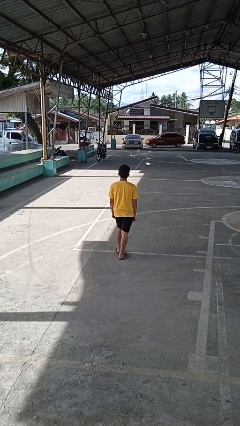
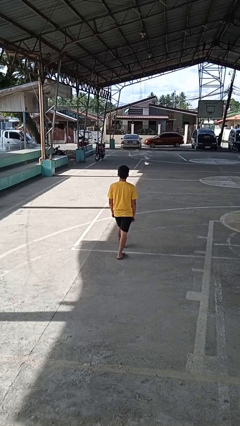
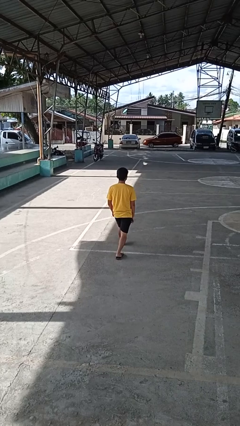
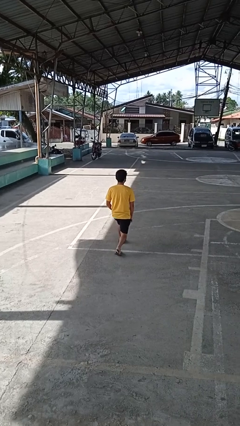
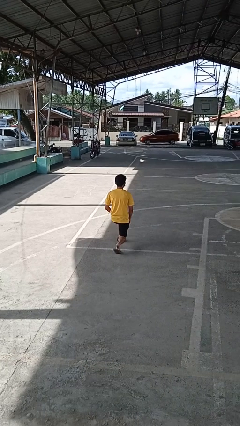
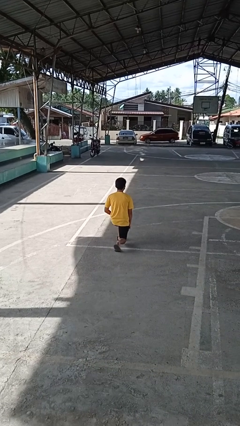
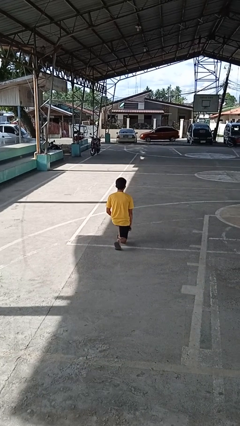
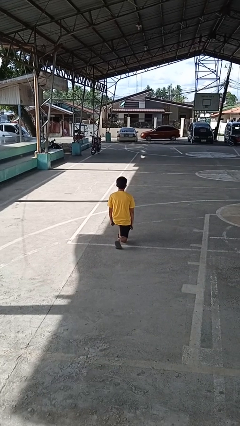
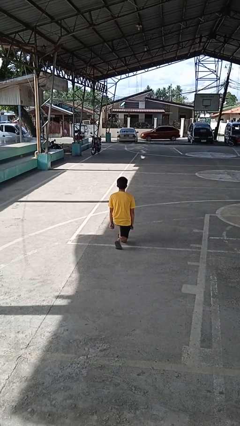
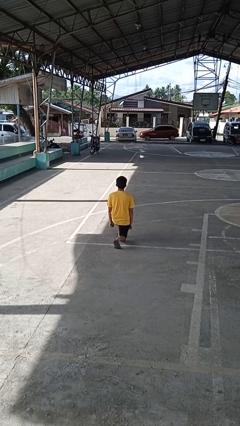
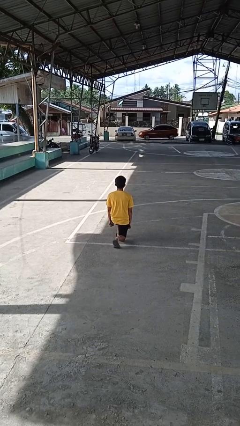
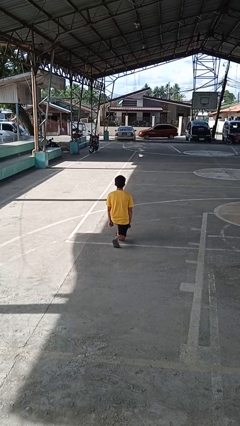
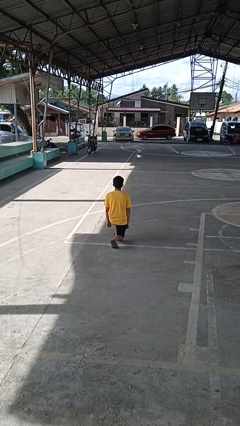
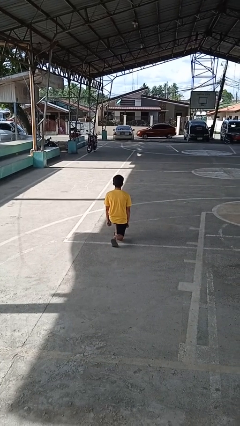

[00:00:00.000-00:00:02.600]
person kneels

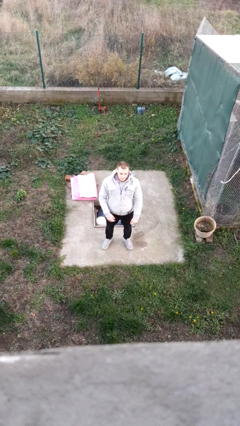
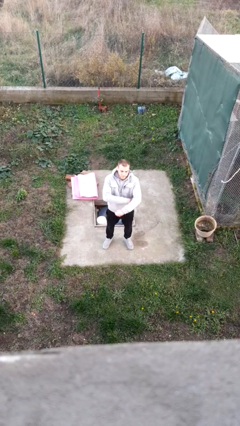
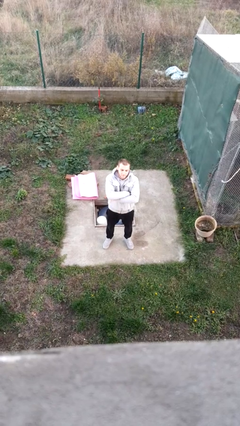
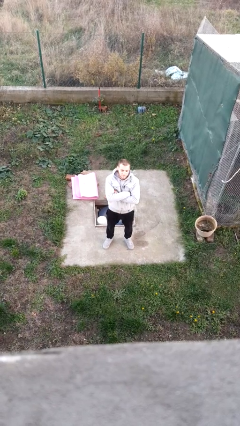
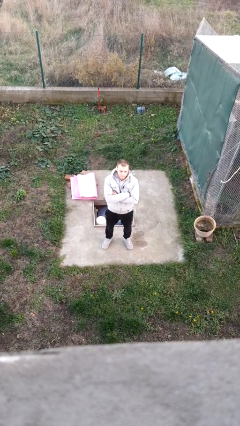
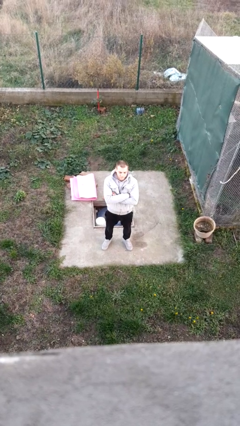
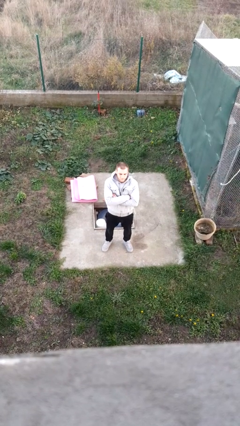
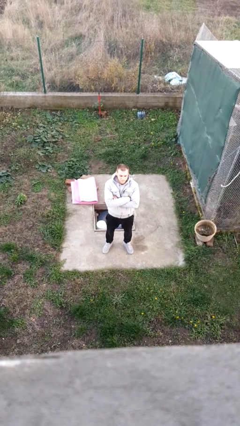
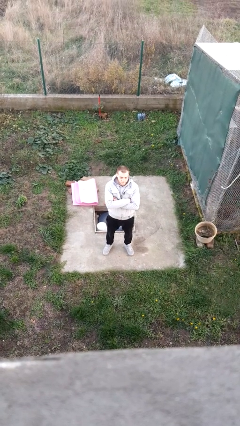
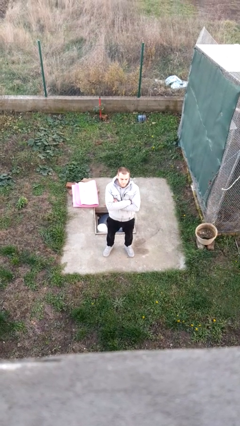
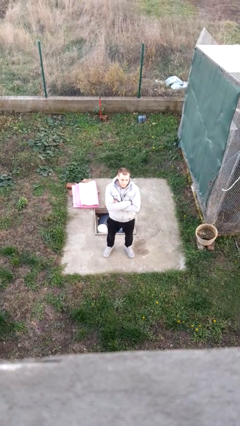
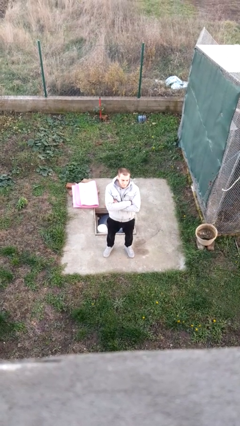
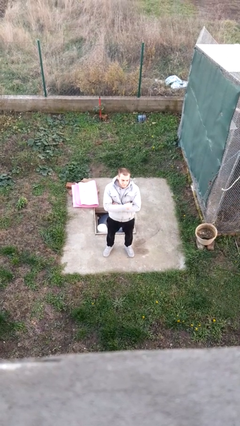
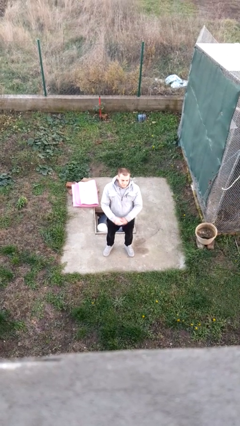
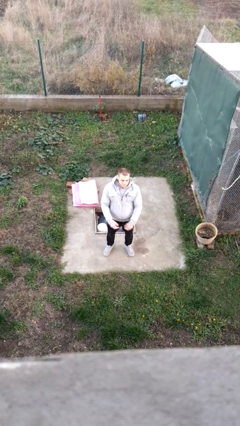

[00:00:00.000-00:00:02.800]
person crosses arms

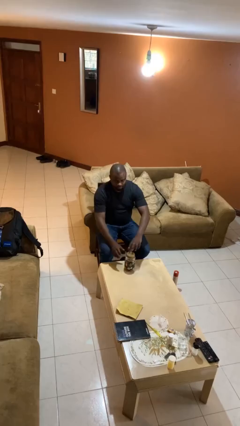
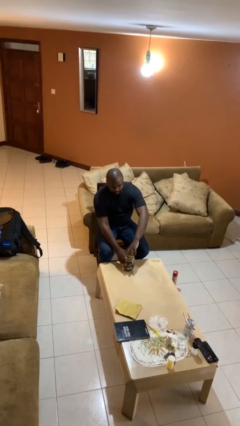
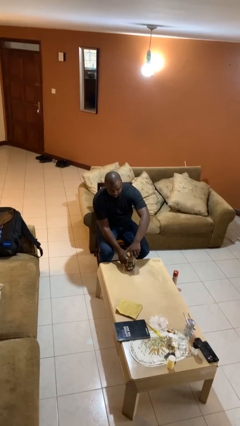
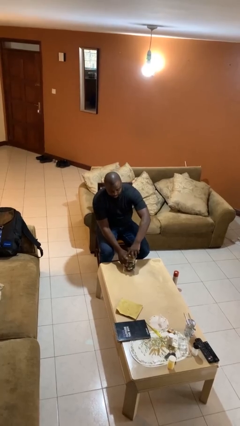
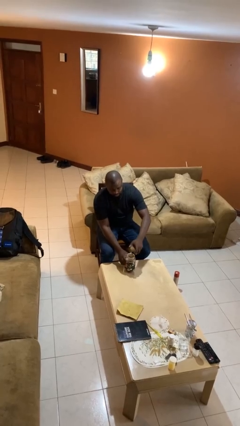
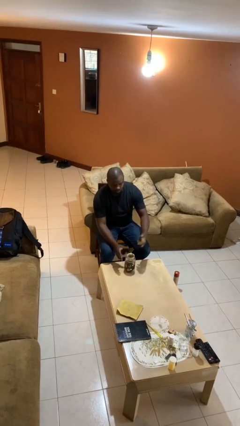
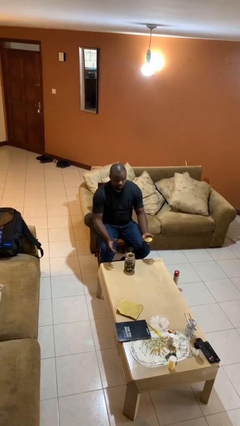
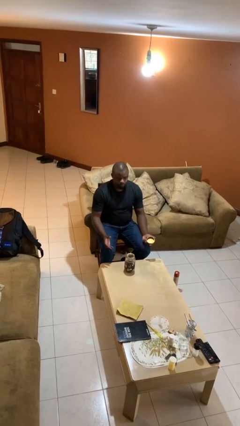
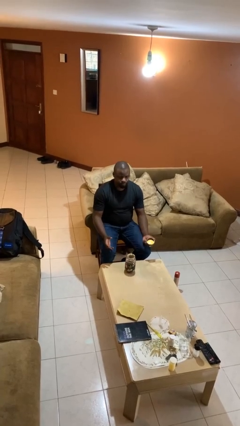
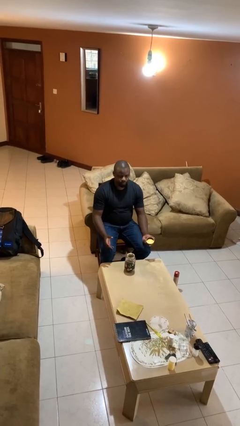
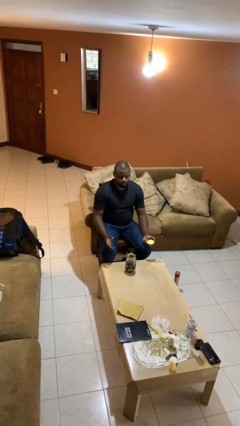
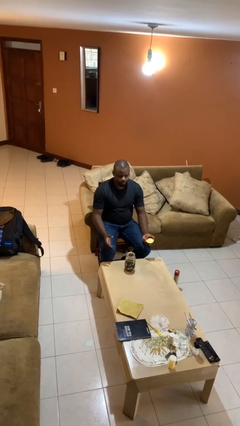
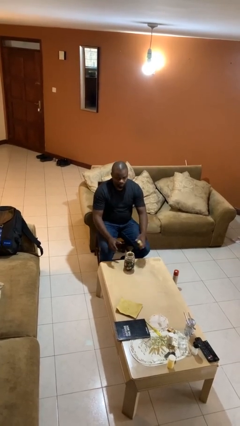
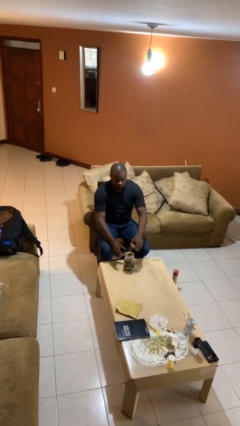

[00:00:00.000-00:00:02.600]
person opens jar

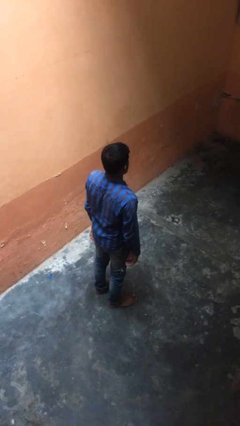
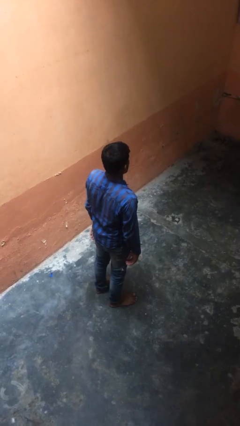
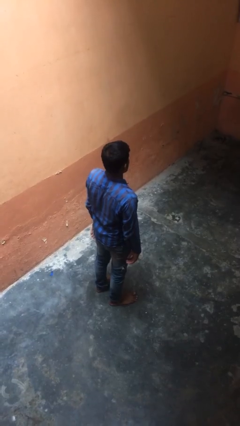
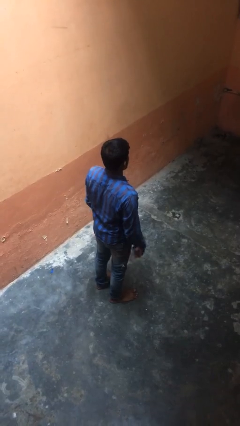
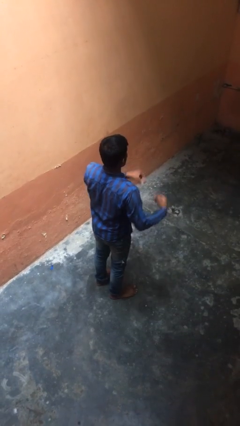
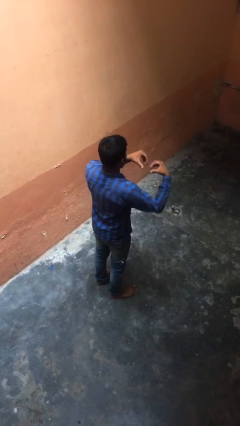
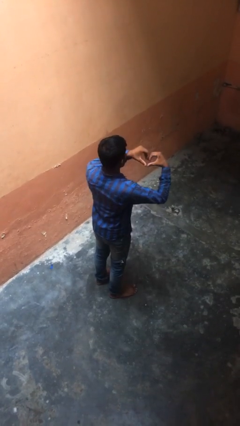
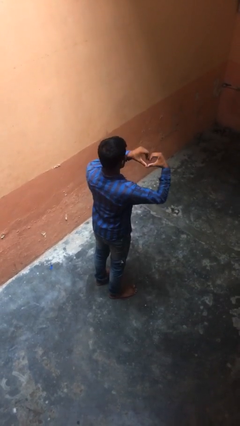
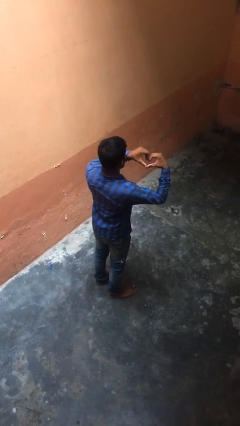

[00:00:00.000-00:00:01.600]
person gestures heart

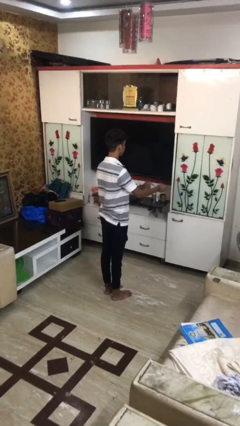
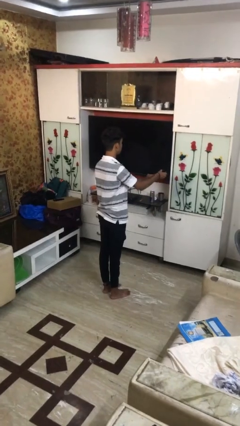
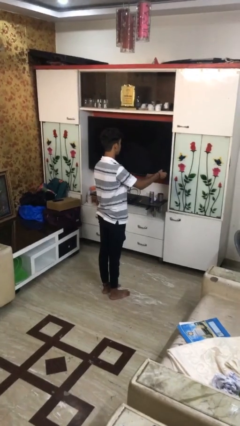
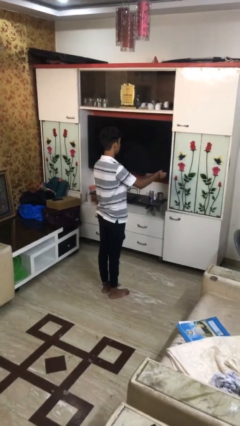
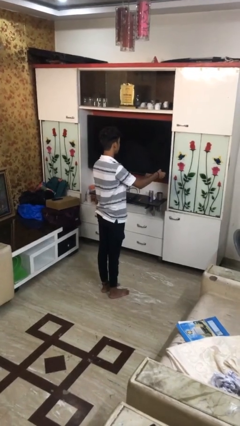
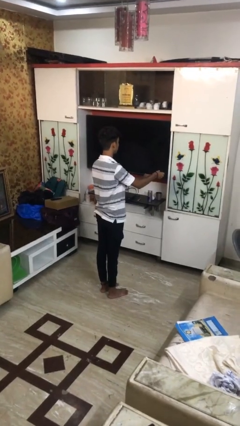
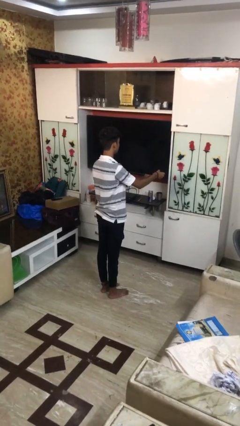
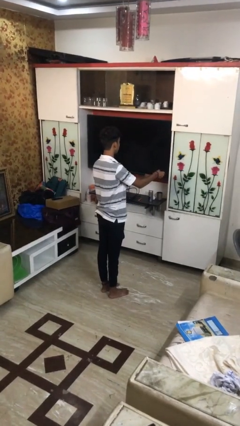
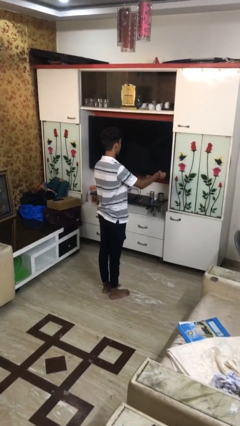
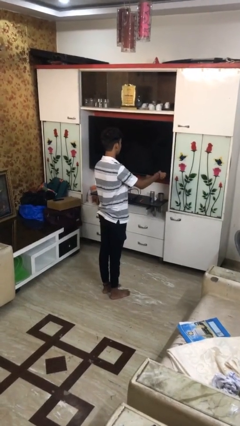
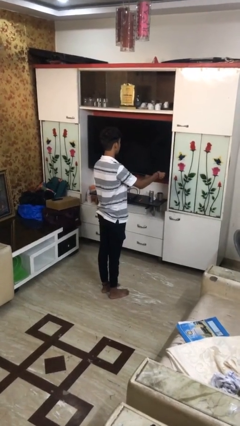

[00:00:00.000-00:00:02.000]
person clips fingernails

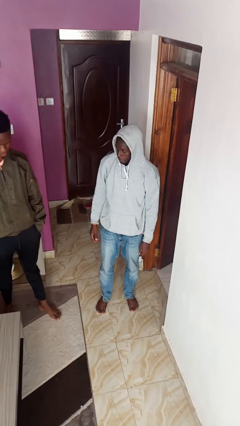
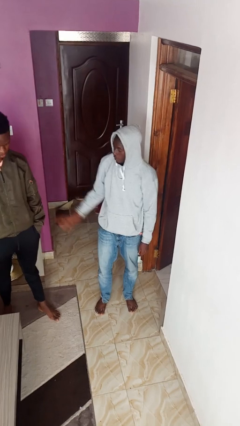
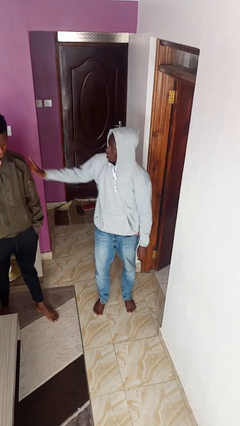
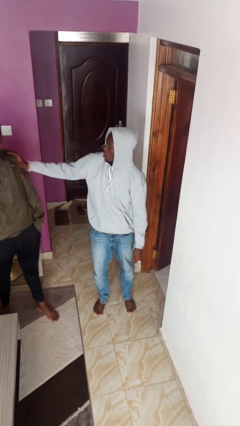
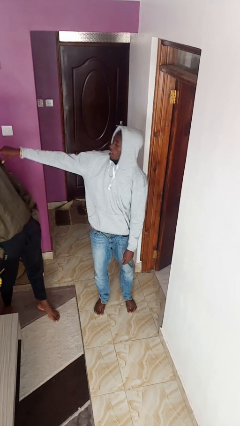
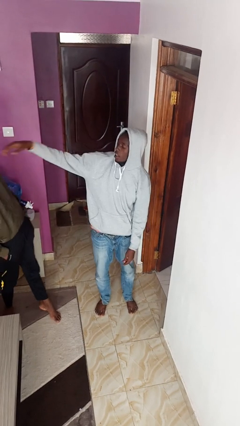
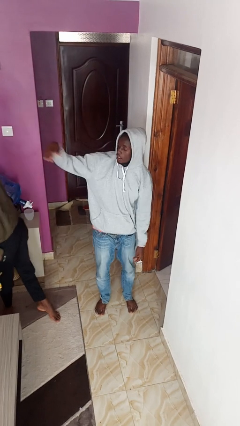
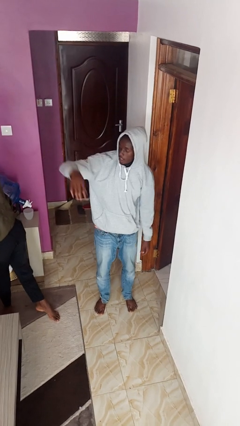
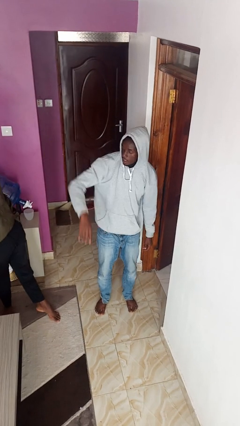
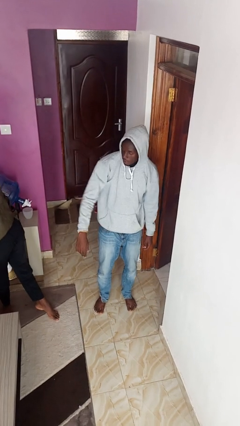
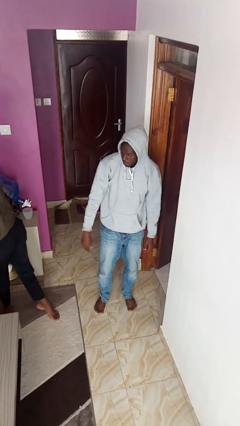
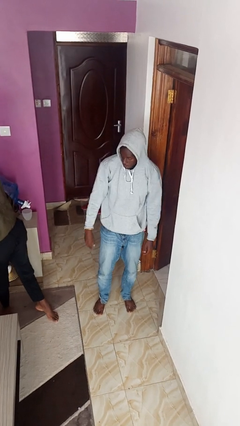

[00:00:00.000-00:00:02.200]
person shoves person

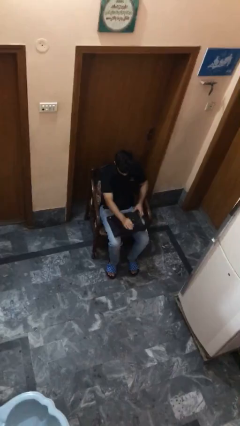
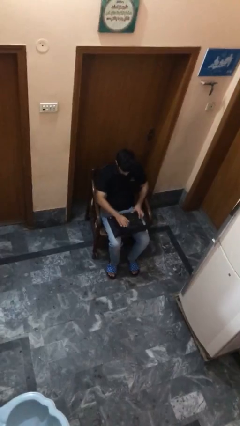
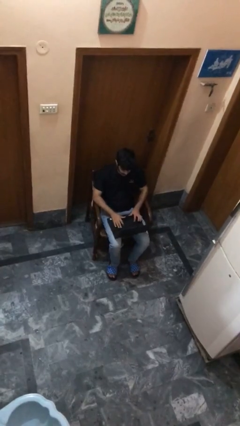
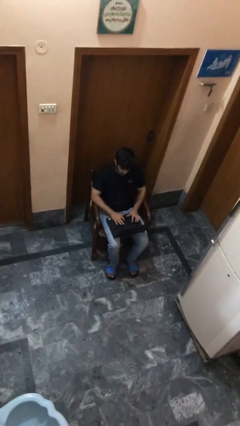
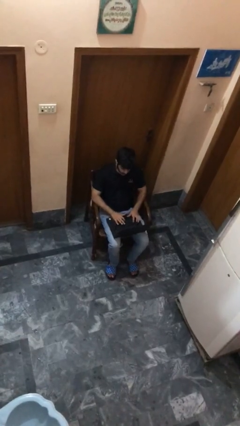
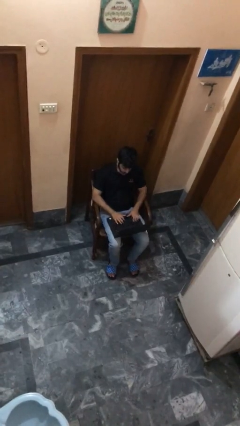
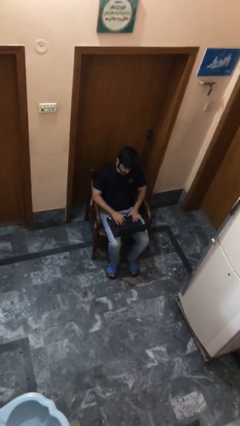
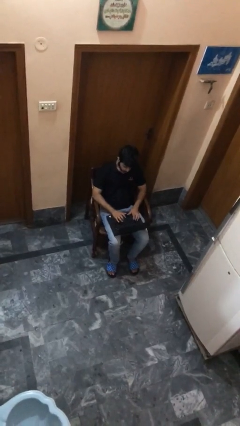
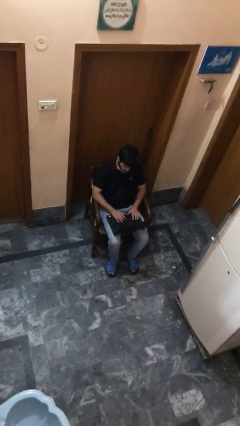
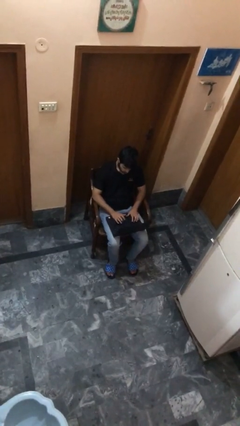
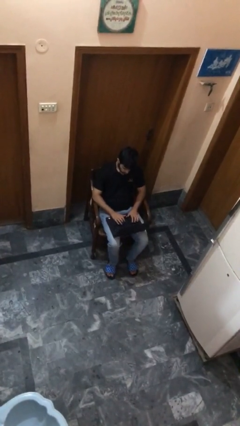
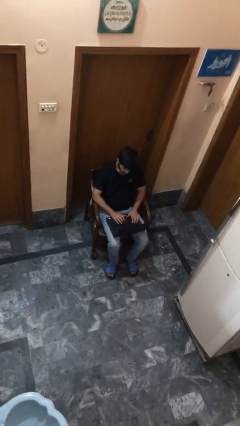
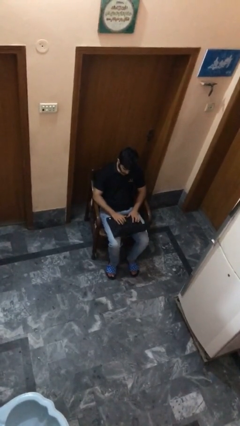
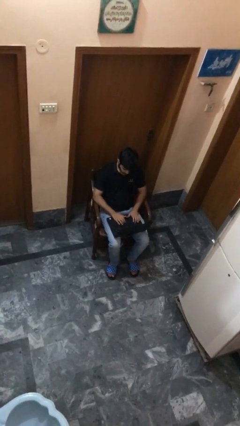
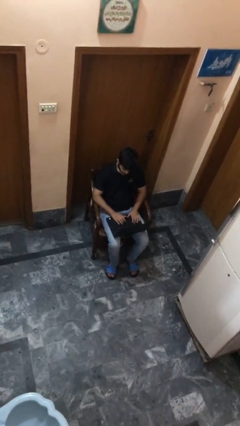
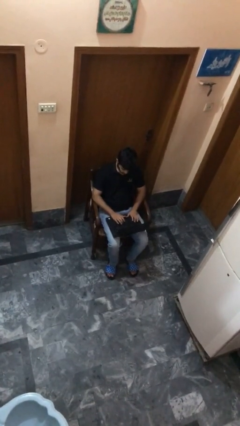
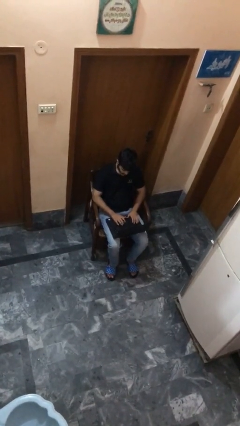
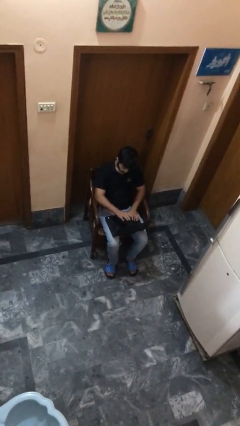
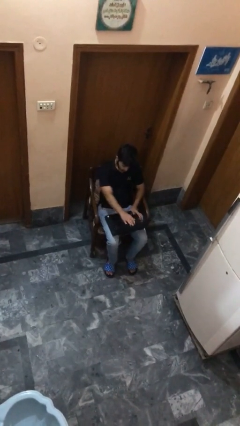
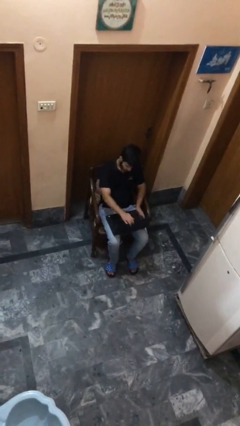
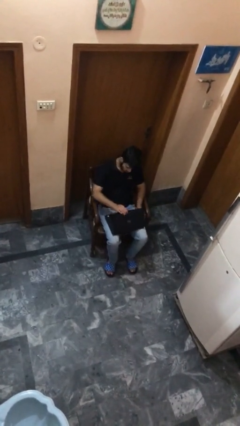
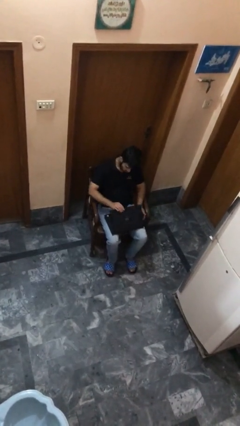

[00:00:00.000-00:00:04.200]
person interacts with laptop
